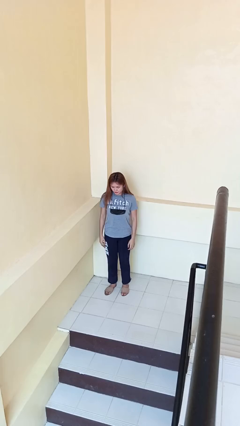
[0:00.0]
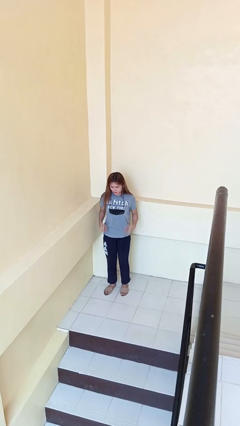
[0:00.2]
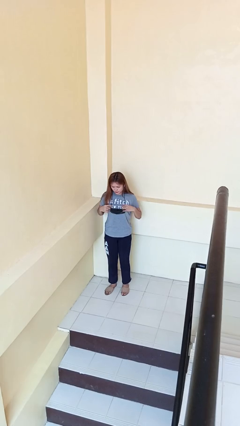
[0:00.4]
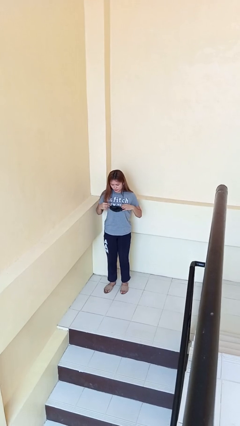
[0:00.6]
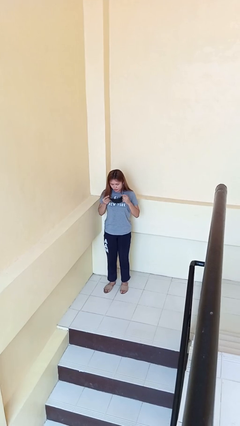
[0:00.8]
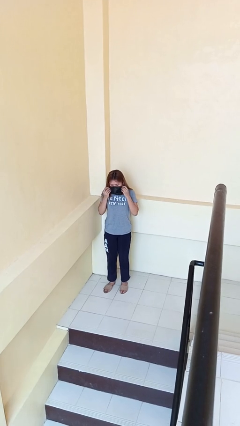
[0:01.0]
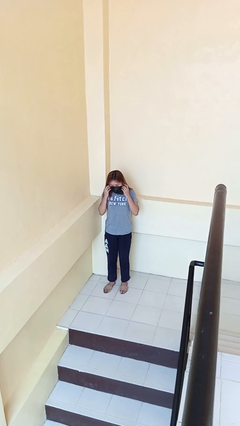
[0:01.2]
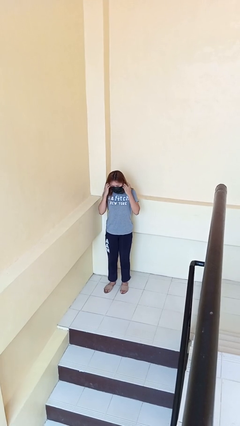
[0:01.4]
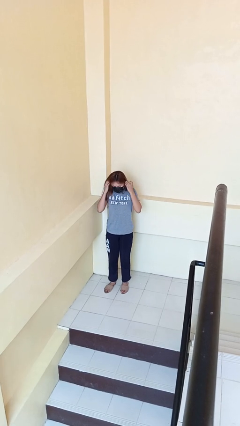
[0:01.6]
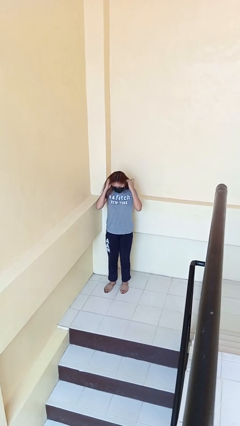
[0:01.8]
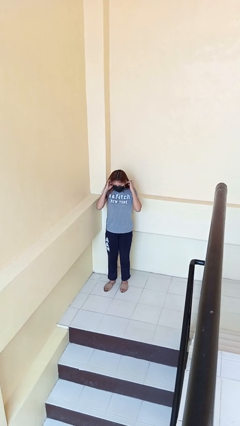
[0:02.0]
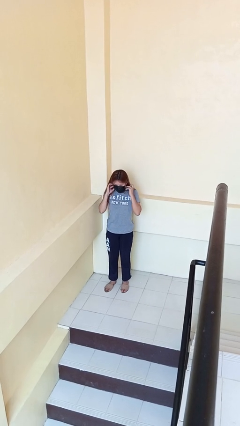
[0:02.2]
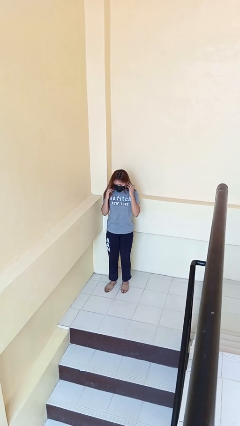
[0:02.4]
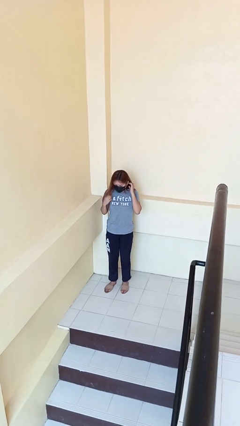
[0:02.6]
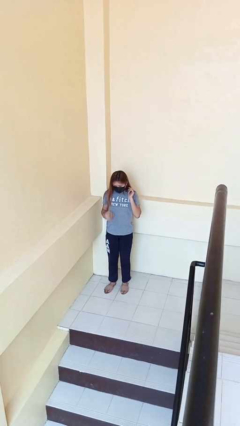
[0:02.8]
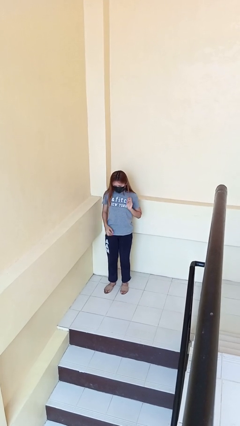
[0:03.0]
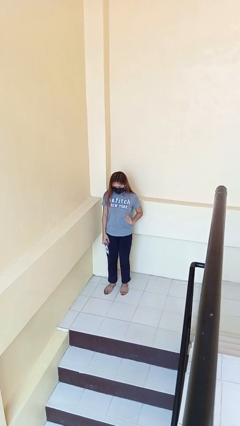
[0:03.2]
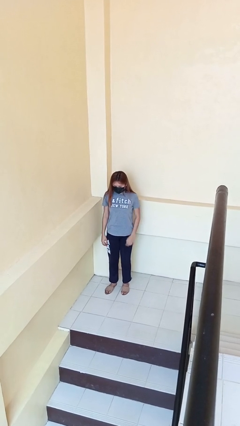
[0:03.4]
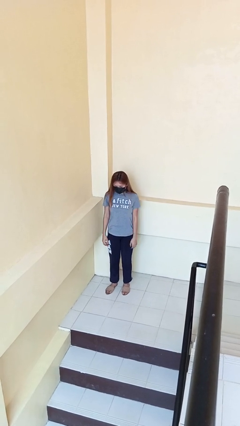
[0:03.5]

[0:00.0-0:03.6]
person puts on facemask

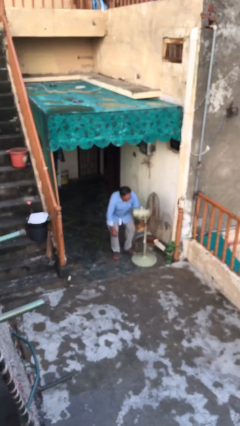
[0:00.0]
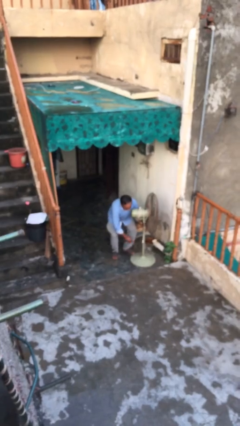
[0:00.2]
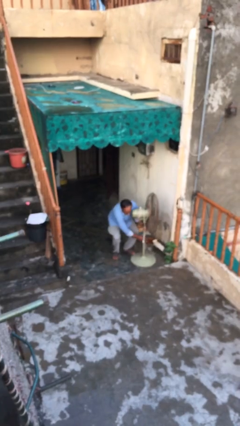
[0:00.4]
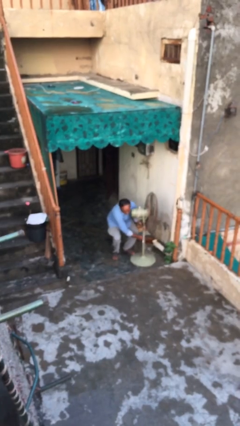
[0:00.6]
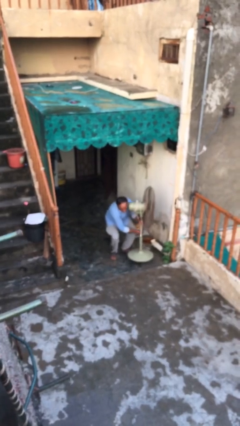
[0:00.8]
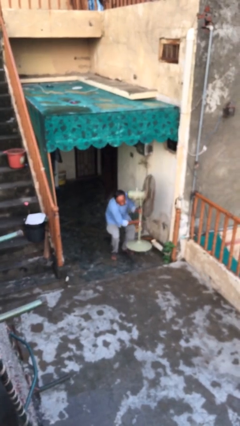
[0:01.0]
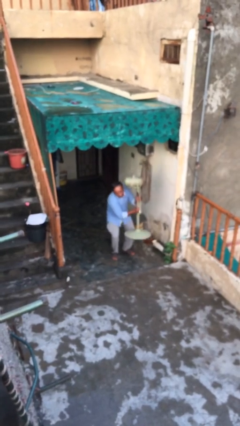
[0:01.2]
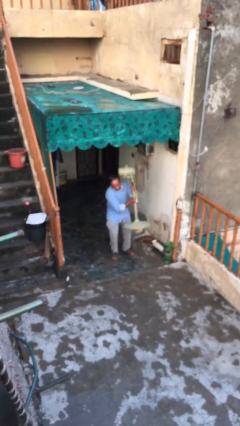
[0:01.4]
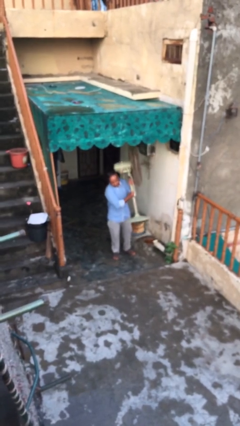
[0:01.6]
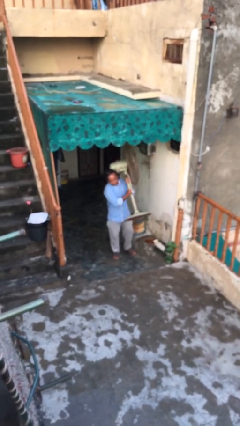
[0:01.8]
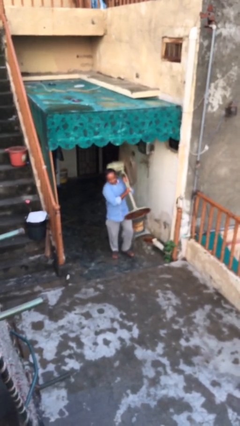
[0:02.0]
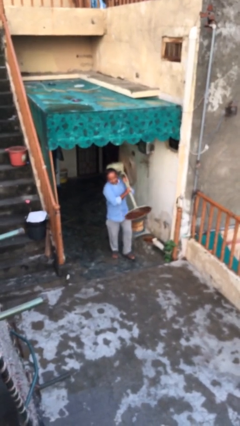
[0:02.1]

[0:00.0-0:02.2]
person picks up object from floor

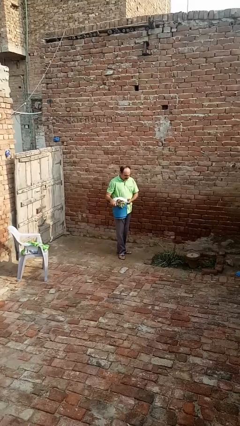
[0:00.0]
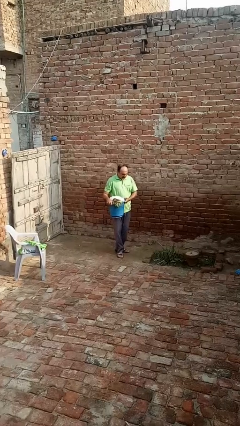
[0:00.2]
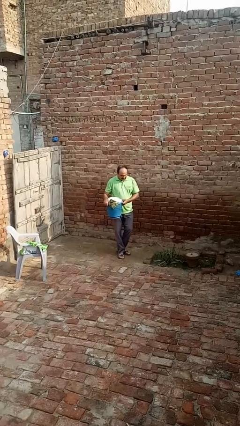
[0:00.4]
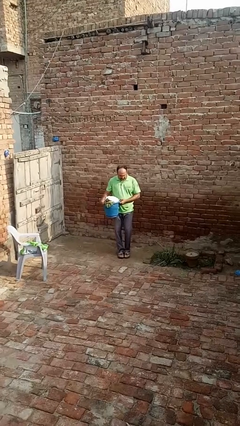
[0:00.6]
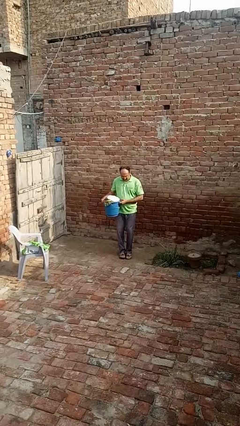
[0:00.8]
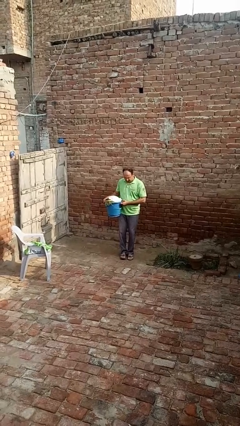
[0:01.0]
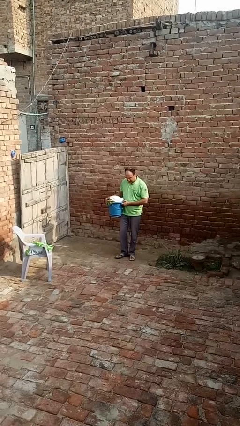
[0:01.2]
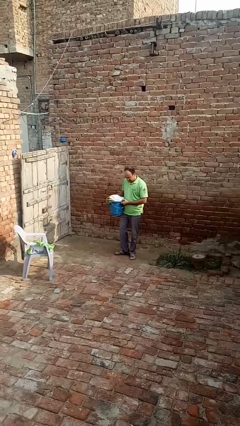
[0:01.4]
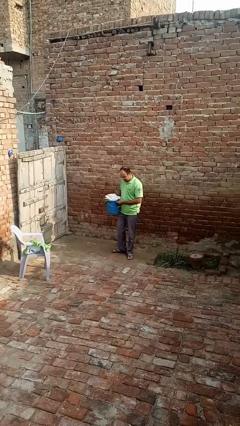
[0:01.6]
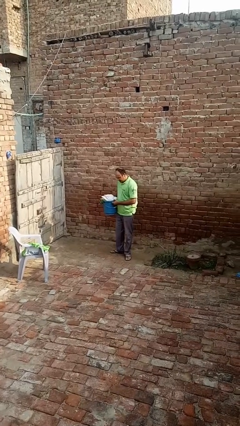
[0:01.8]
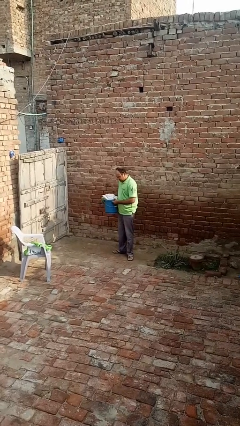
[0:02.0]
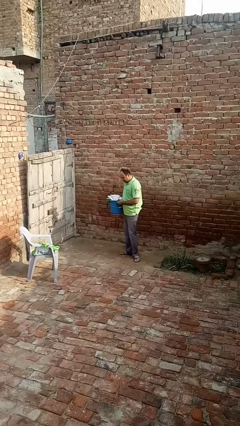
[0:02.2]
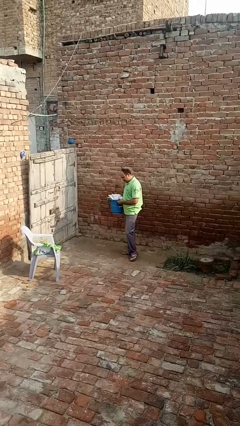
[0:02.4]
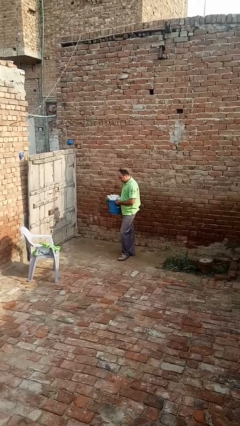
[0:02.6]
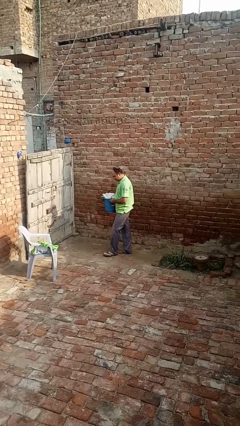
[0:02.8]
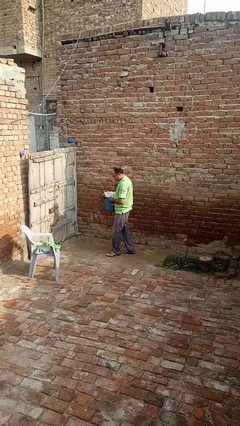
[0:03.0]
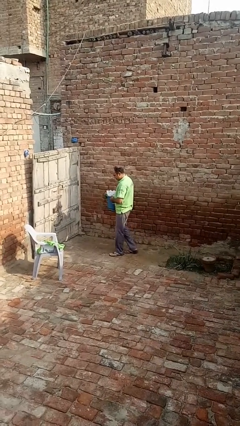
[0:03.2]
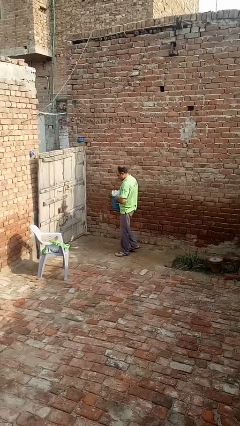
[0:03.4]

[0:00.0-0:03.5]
person carries laundry basket

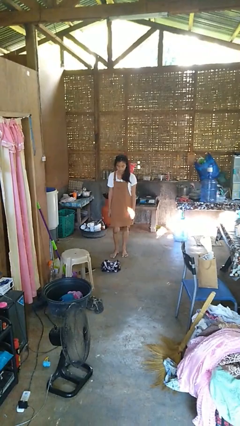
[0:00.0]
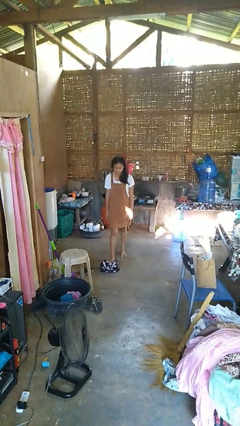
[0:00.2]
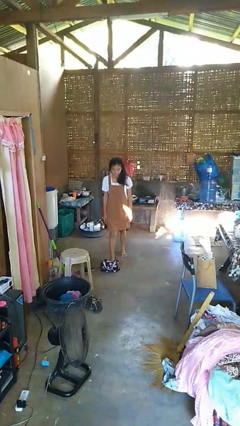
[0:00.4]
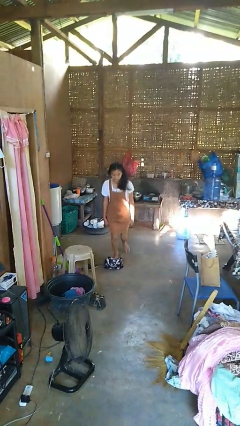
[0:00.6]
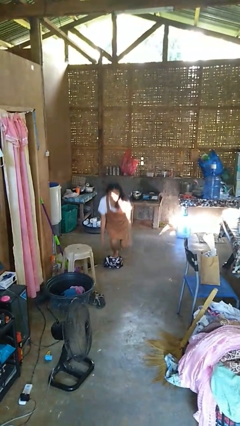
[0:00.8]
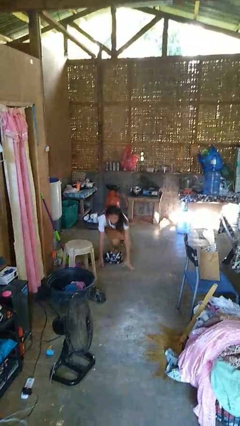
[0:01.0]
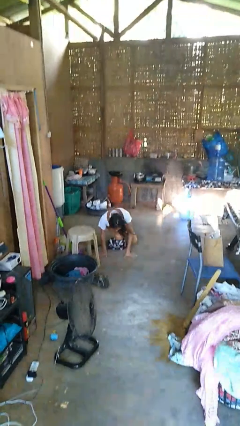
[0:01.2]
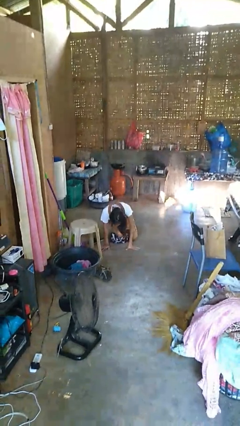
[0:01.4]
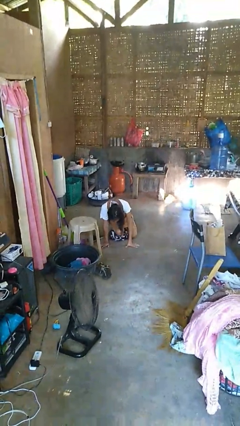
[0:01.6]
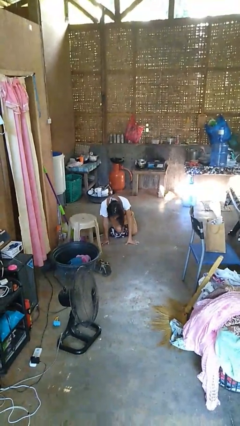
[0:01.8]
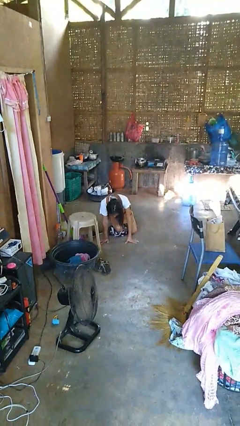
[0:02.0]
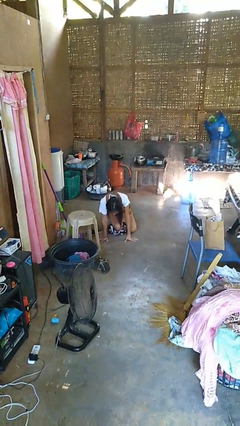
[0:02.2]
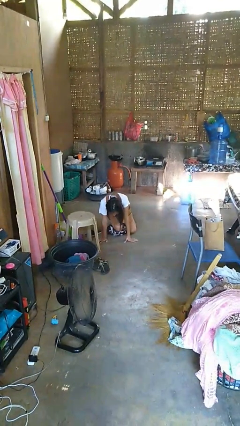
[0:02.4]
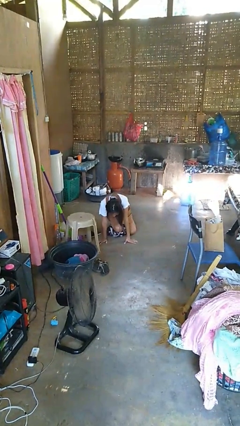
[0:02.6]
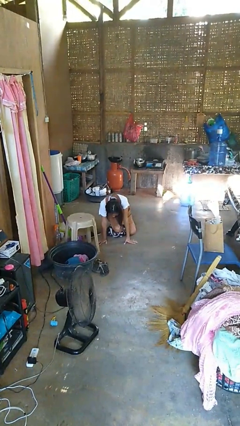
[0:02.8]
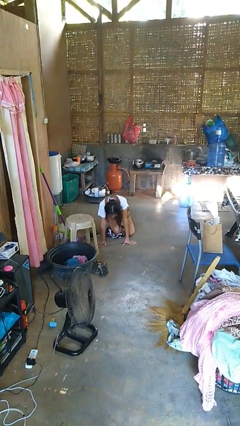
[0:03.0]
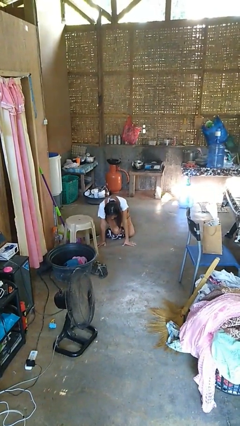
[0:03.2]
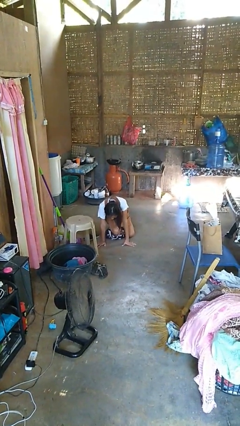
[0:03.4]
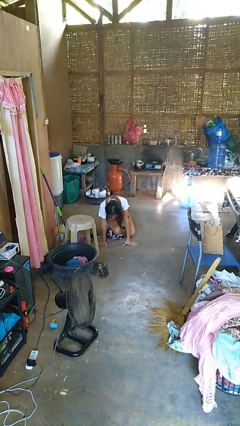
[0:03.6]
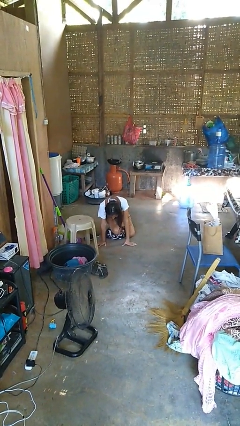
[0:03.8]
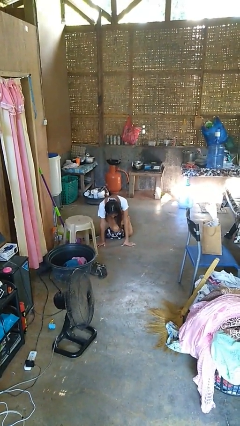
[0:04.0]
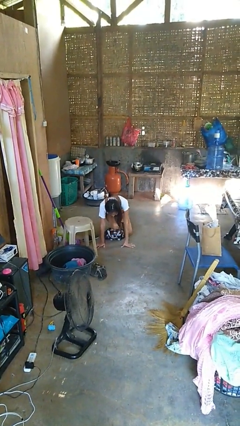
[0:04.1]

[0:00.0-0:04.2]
person trips on object on floor

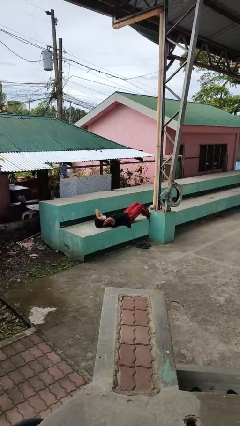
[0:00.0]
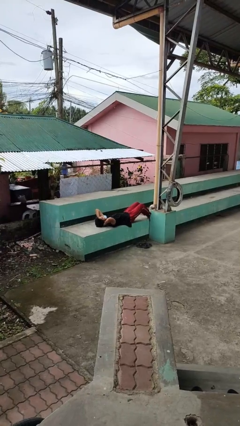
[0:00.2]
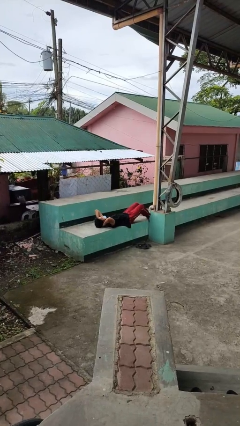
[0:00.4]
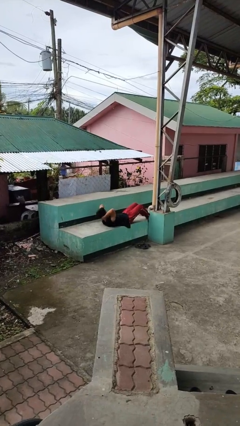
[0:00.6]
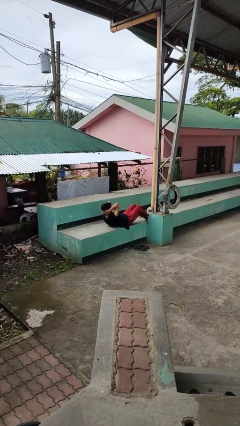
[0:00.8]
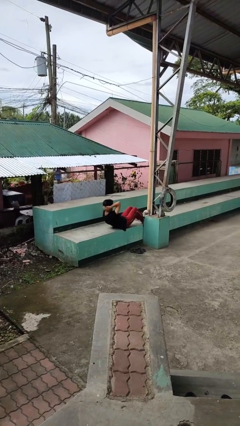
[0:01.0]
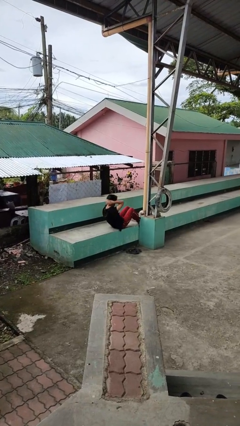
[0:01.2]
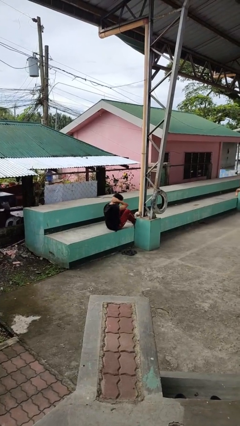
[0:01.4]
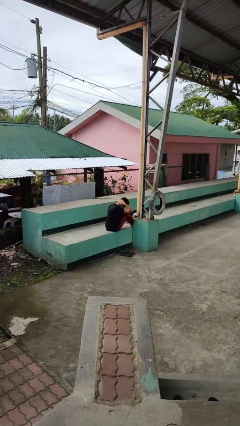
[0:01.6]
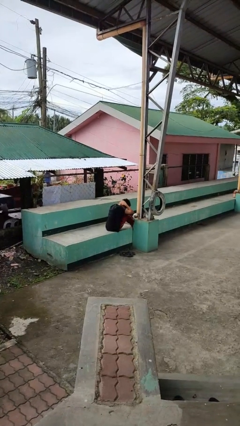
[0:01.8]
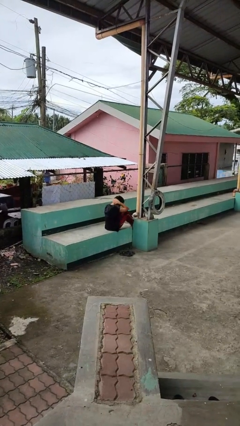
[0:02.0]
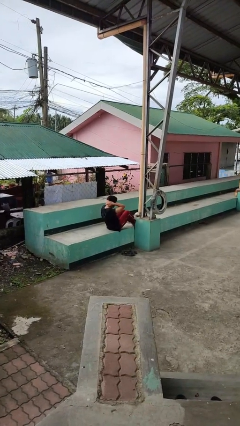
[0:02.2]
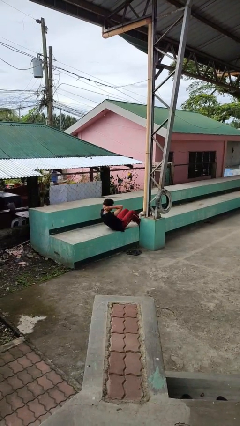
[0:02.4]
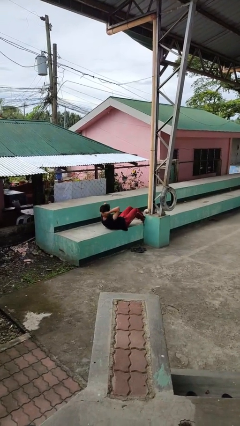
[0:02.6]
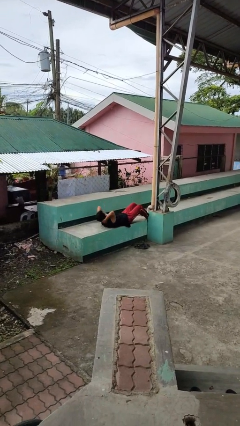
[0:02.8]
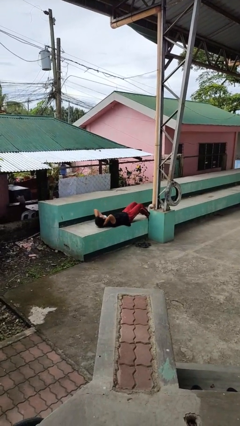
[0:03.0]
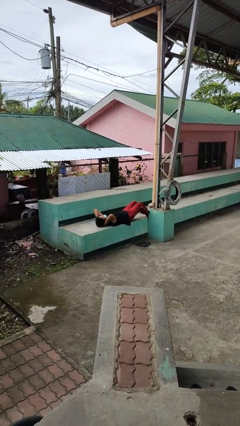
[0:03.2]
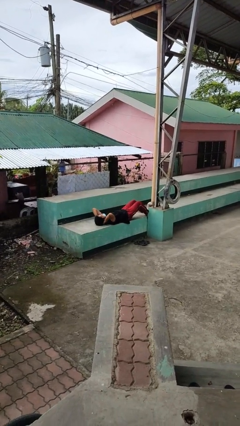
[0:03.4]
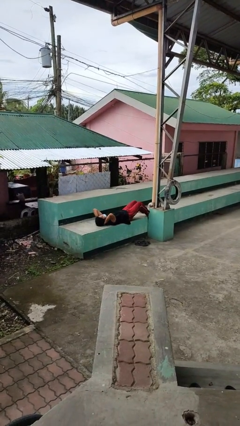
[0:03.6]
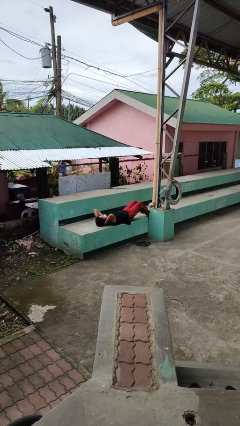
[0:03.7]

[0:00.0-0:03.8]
person exercises with situp

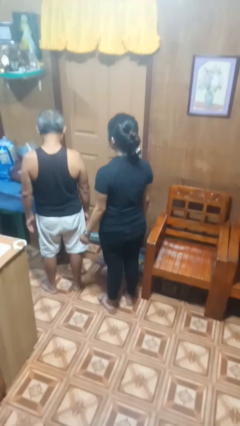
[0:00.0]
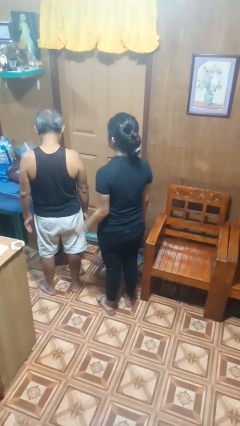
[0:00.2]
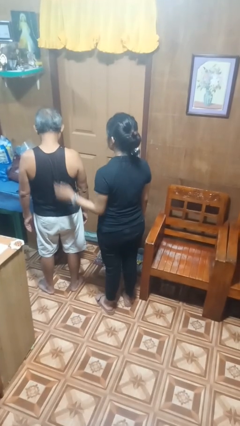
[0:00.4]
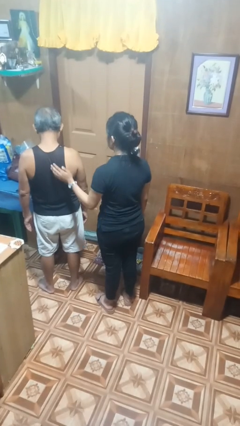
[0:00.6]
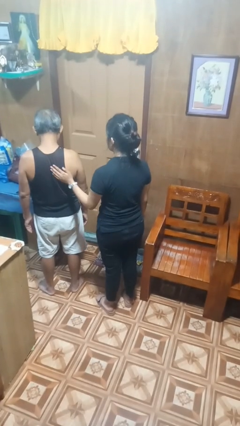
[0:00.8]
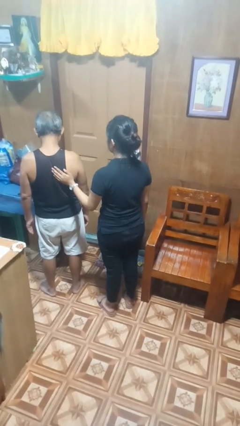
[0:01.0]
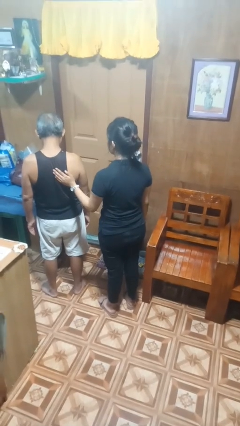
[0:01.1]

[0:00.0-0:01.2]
person touches back of person
